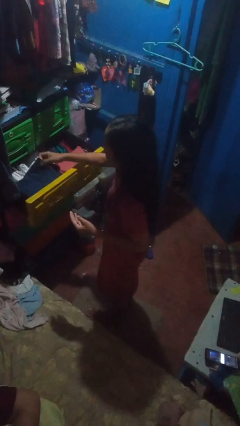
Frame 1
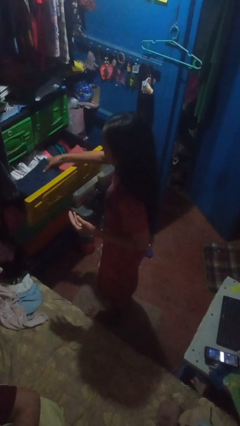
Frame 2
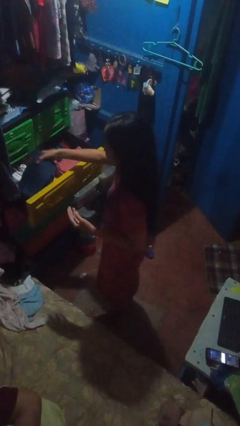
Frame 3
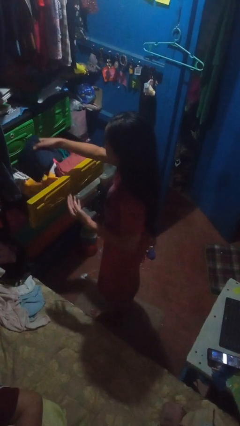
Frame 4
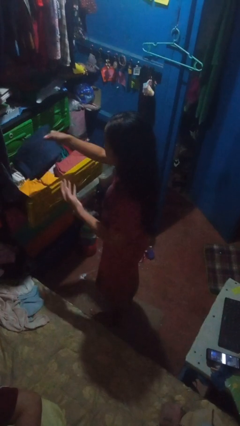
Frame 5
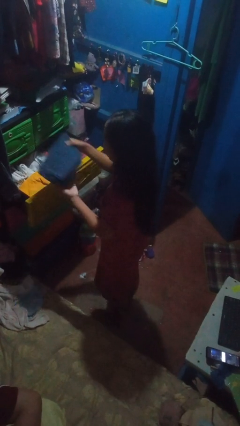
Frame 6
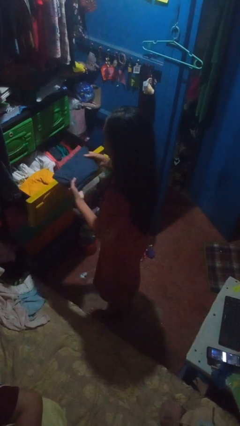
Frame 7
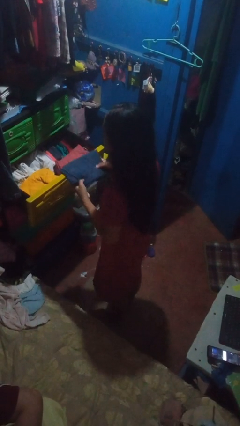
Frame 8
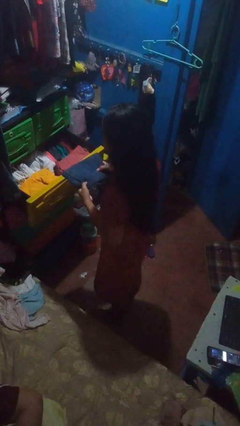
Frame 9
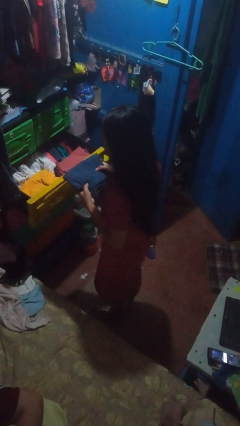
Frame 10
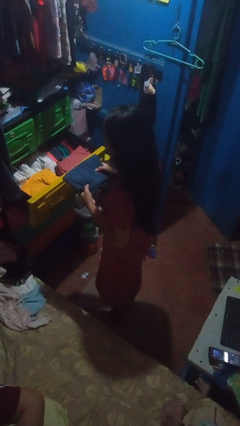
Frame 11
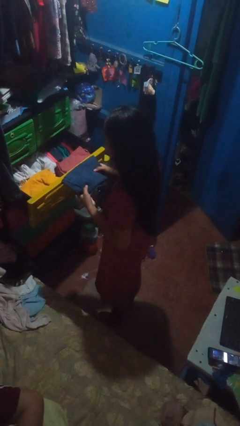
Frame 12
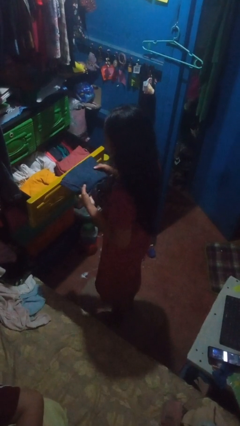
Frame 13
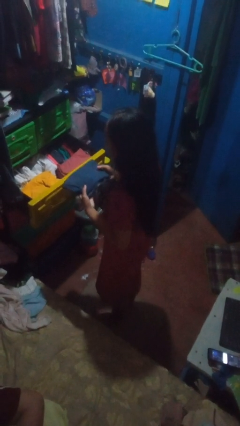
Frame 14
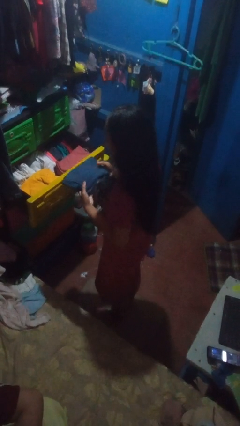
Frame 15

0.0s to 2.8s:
person takes clothes from dresser

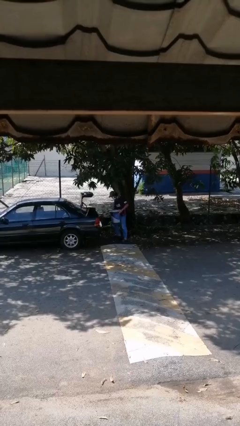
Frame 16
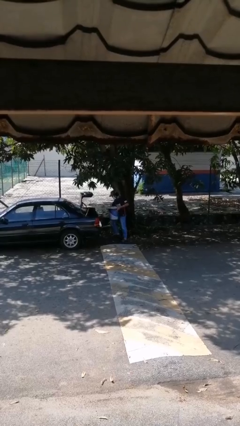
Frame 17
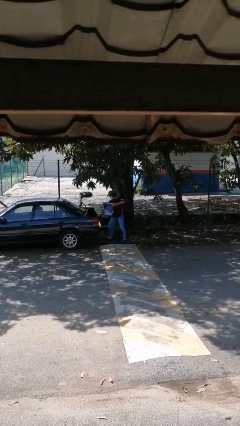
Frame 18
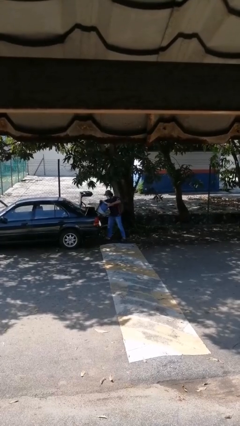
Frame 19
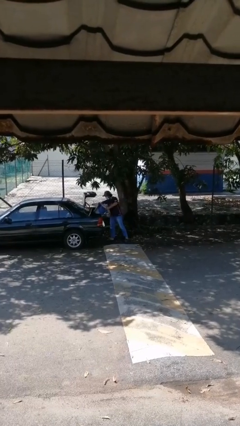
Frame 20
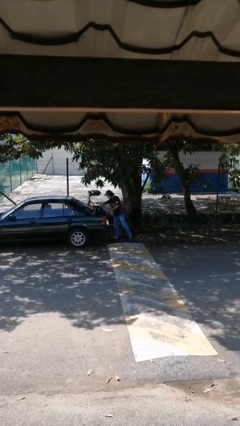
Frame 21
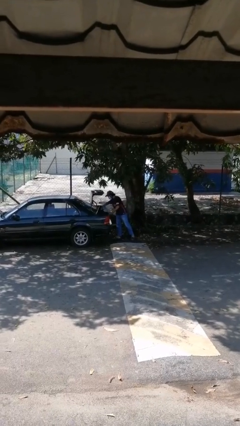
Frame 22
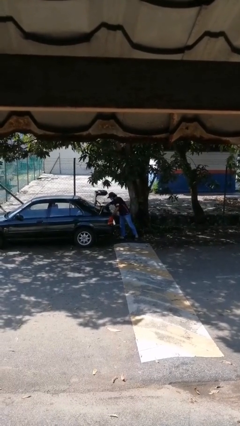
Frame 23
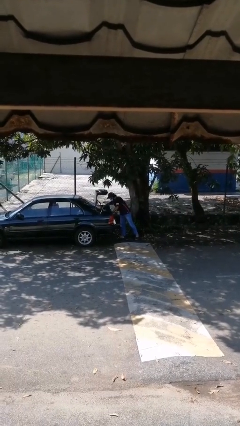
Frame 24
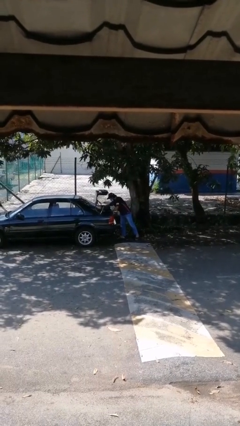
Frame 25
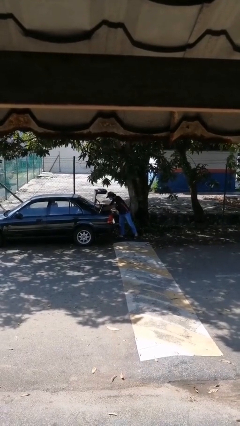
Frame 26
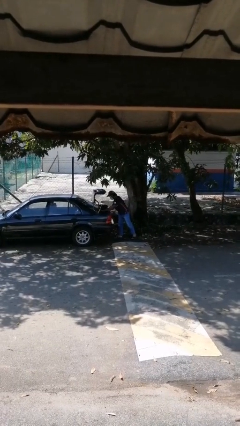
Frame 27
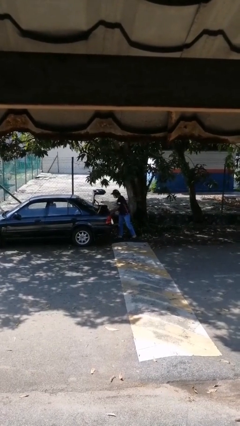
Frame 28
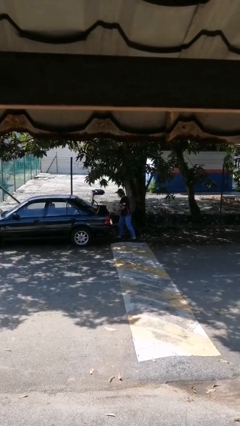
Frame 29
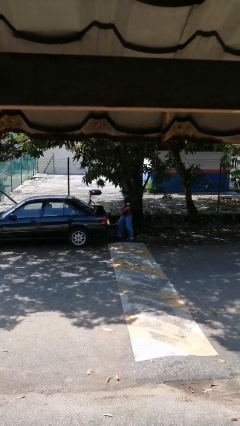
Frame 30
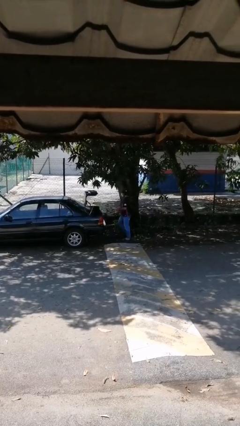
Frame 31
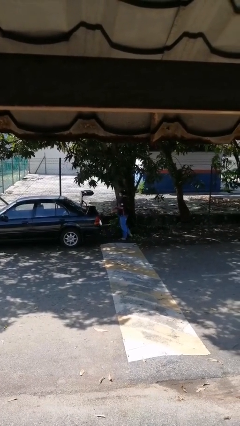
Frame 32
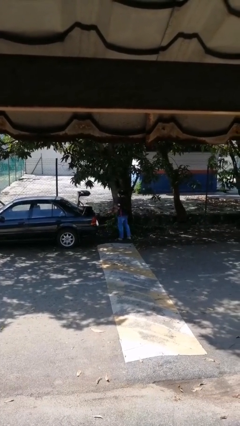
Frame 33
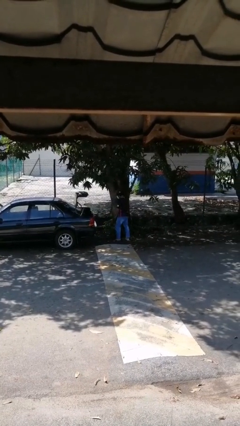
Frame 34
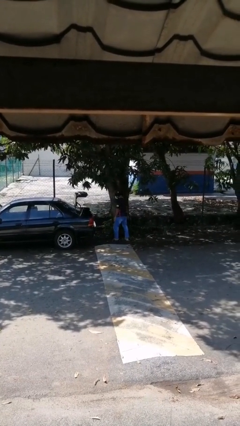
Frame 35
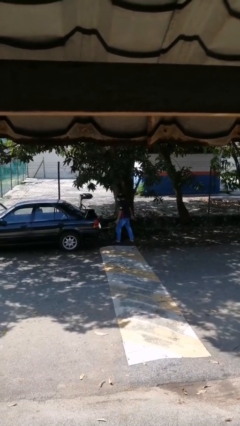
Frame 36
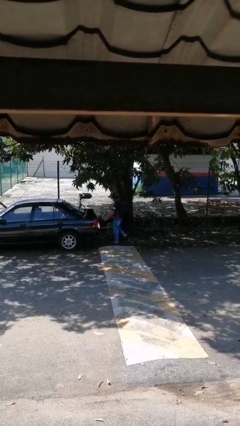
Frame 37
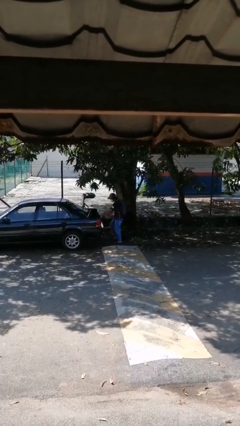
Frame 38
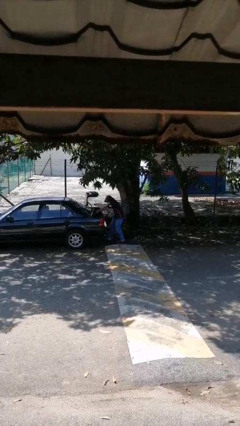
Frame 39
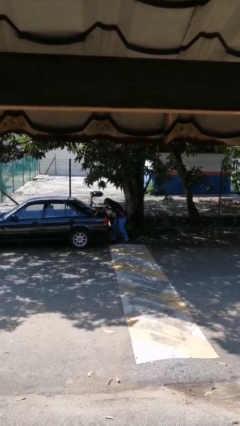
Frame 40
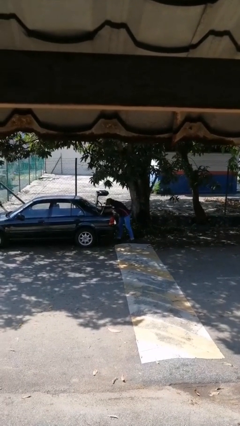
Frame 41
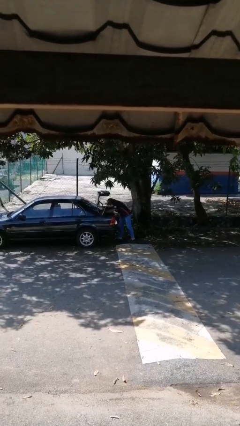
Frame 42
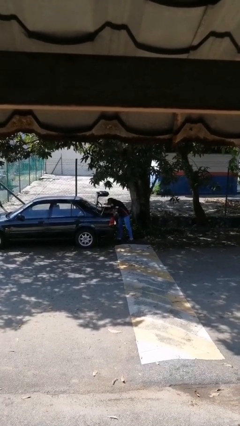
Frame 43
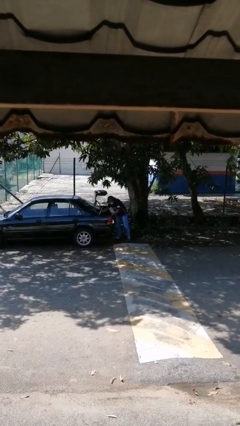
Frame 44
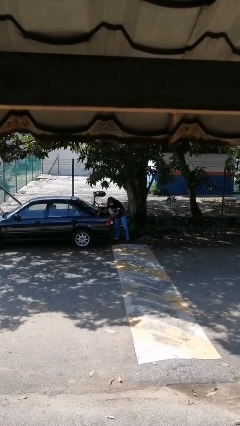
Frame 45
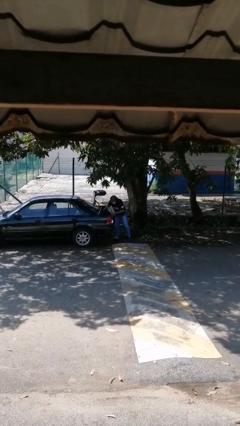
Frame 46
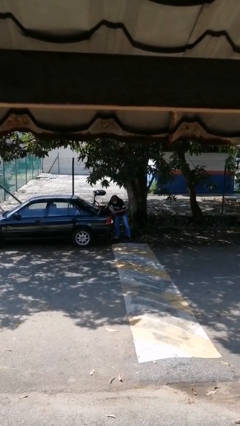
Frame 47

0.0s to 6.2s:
person loads car

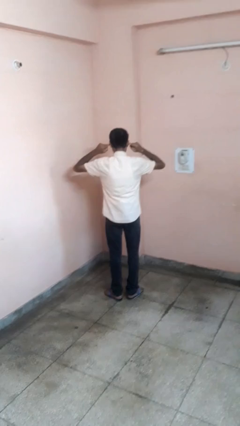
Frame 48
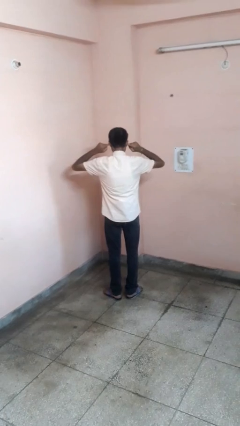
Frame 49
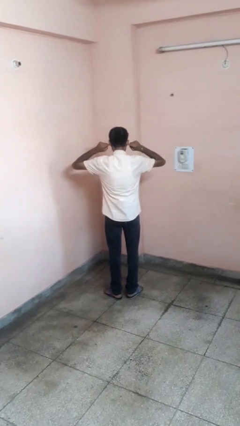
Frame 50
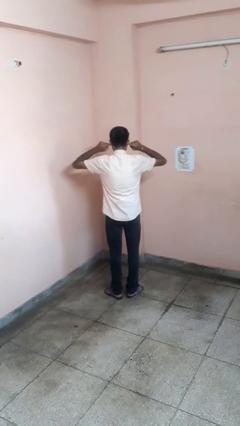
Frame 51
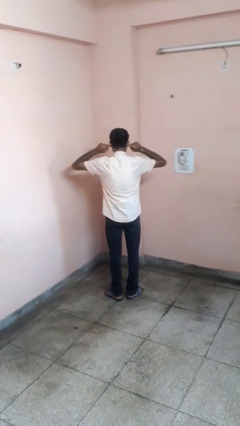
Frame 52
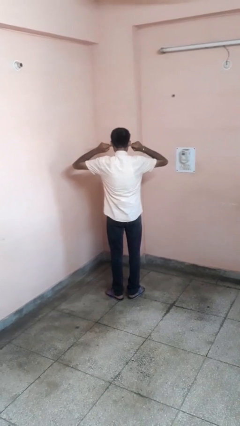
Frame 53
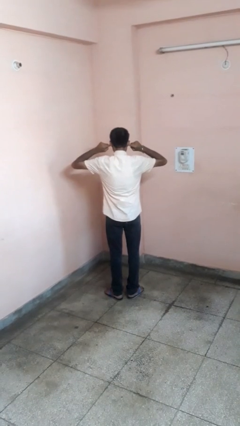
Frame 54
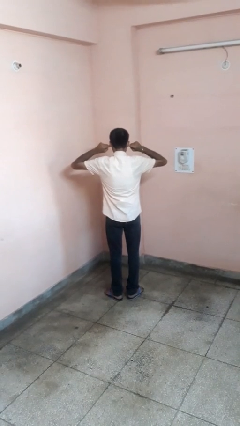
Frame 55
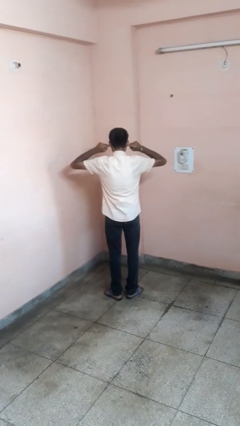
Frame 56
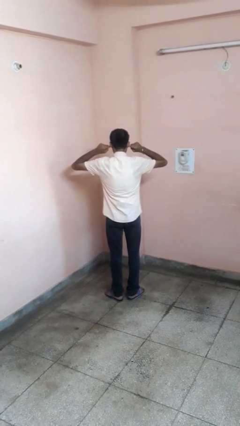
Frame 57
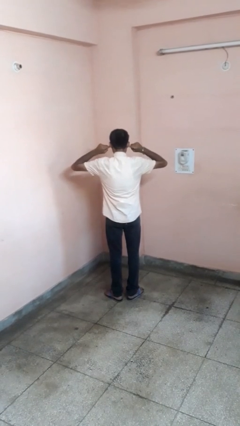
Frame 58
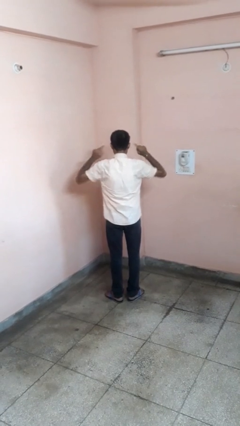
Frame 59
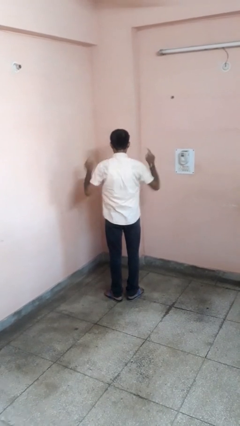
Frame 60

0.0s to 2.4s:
person puts fingers in ear

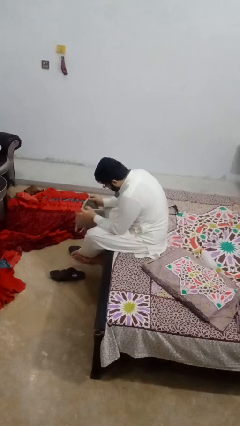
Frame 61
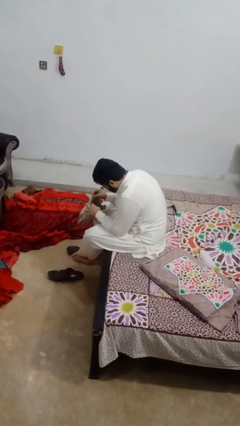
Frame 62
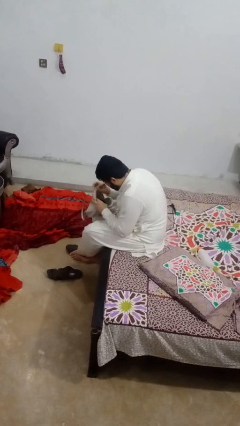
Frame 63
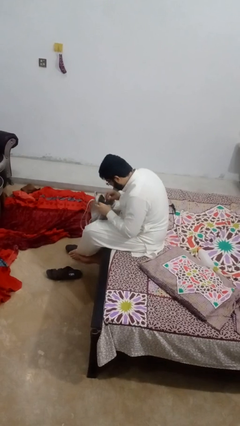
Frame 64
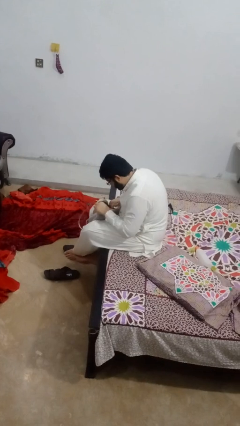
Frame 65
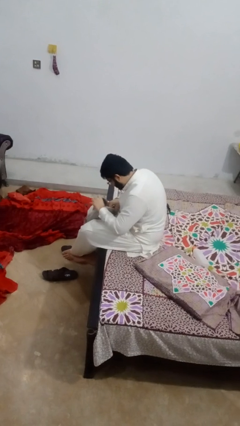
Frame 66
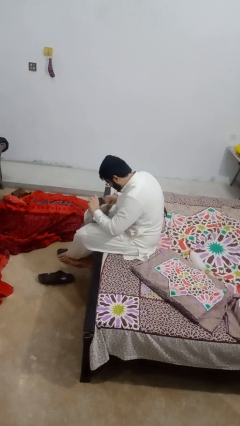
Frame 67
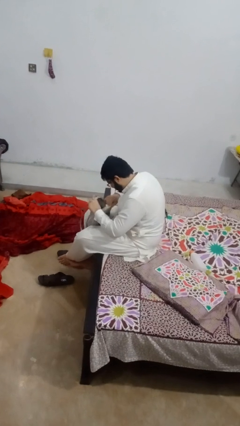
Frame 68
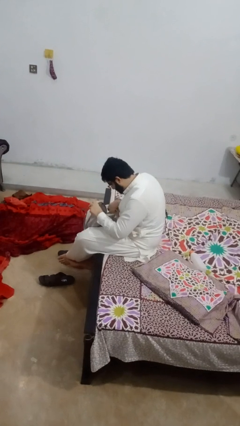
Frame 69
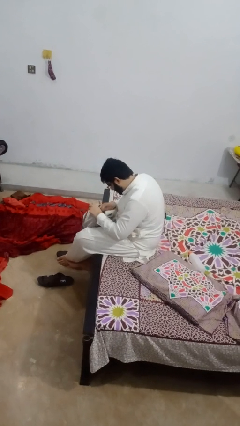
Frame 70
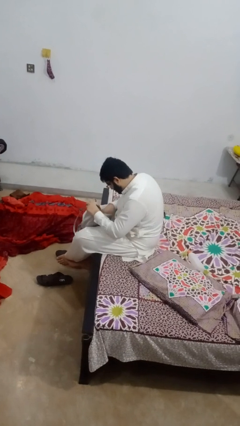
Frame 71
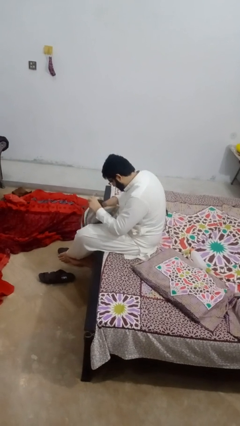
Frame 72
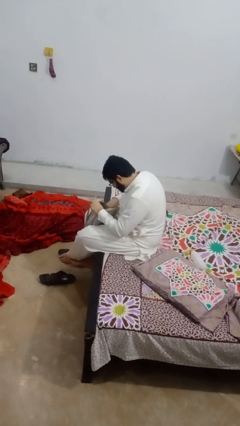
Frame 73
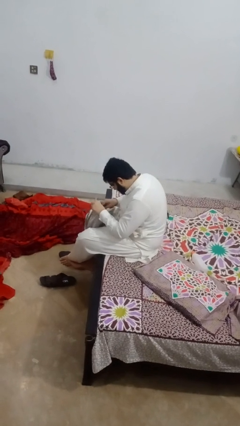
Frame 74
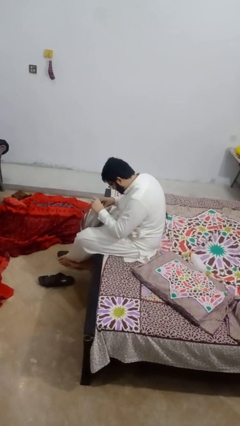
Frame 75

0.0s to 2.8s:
person searches in purse

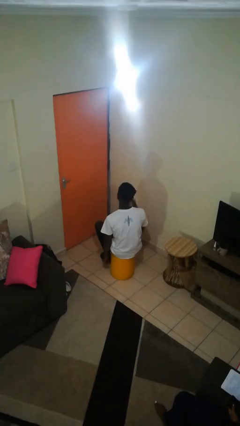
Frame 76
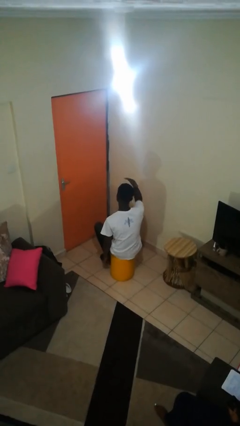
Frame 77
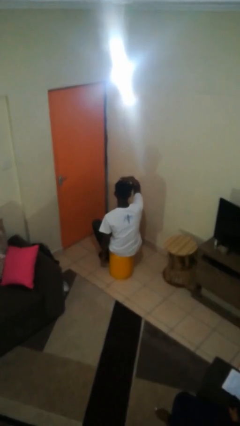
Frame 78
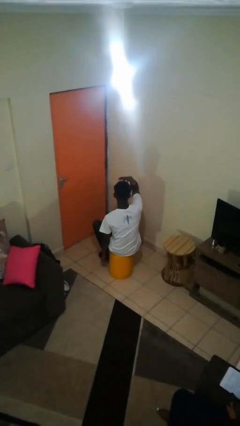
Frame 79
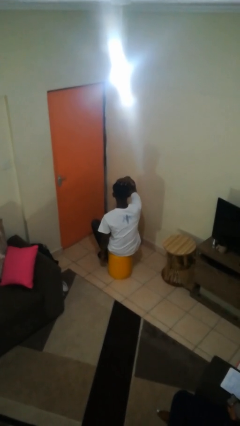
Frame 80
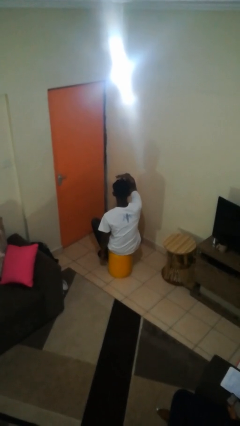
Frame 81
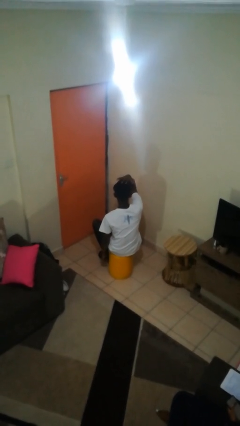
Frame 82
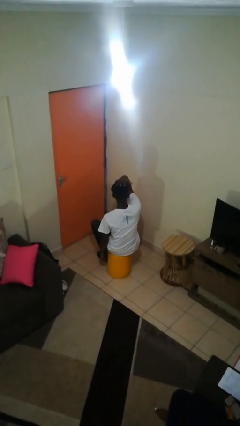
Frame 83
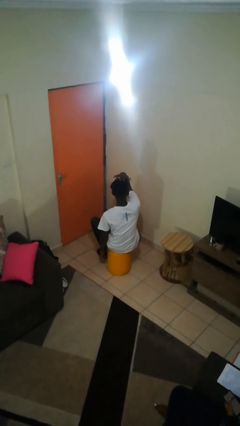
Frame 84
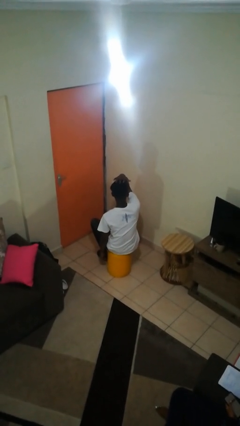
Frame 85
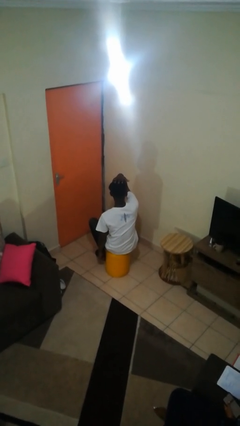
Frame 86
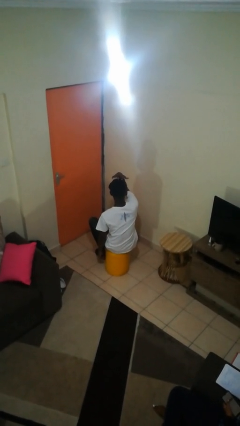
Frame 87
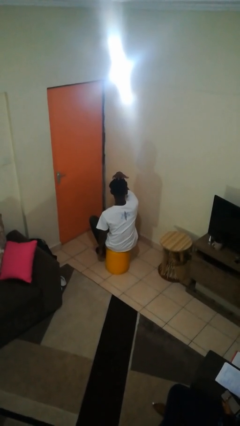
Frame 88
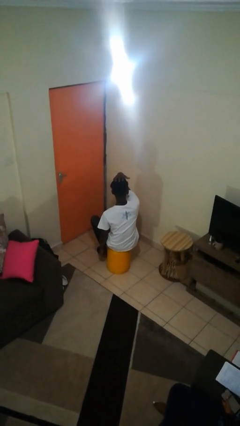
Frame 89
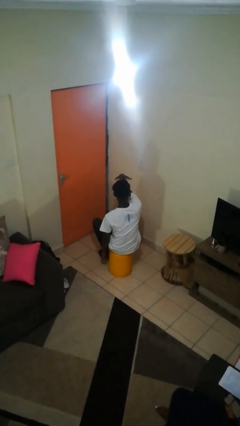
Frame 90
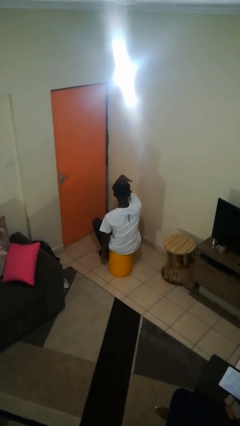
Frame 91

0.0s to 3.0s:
person pats head

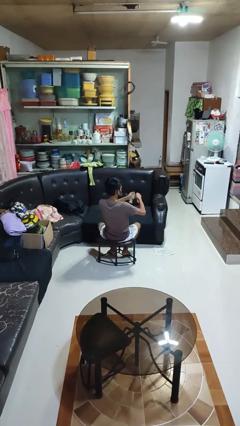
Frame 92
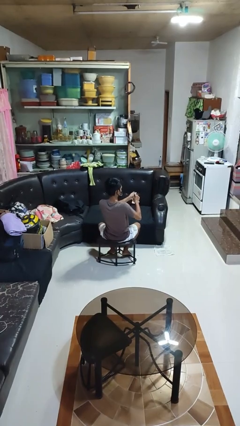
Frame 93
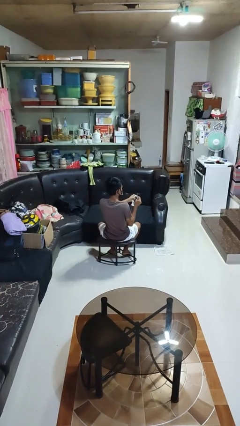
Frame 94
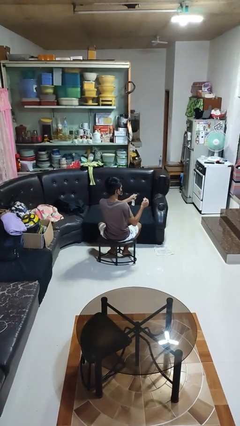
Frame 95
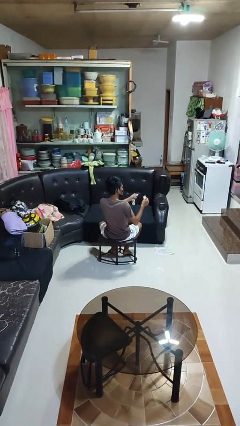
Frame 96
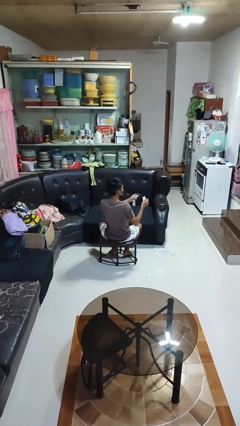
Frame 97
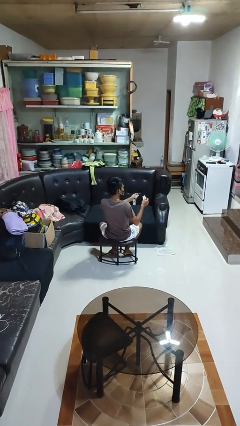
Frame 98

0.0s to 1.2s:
person tears paper
